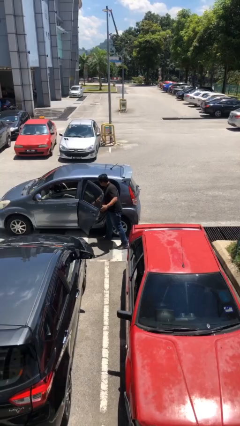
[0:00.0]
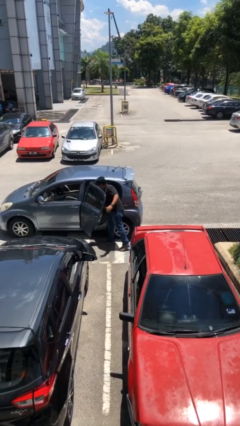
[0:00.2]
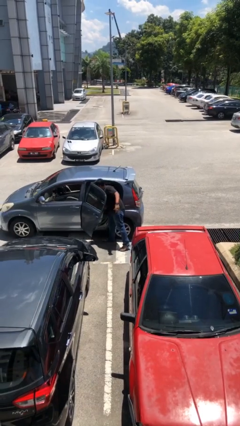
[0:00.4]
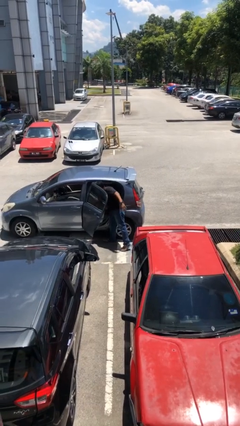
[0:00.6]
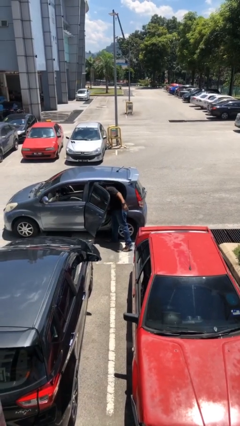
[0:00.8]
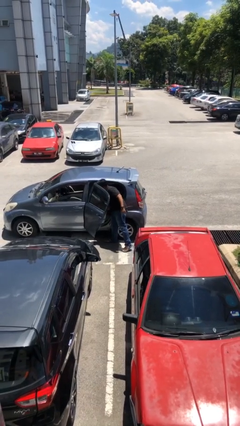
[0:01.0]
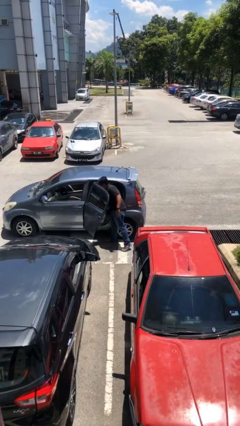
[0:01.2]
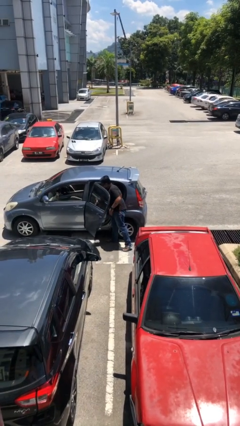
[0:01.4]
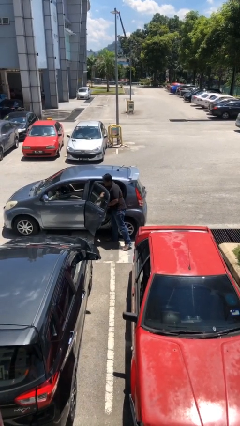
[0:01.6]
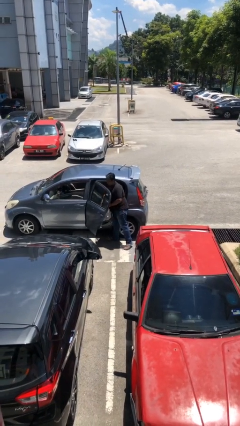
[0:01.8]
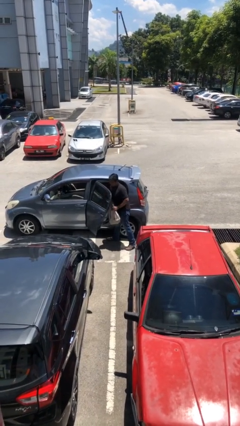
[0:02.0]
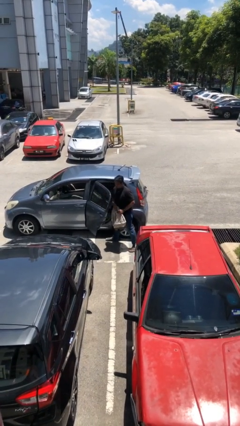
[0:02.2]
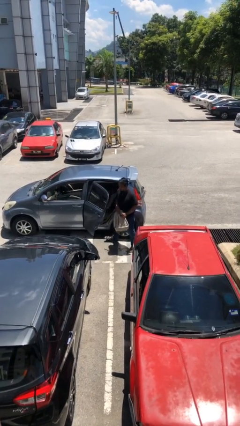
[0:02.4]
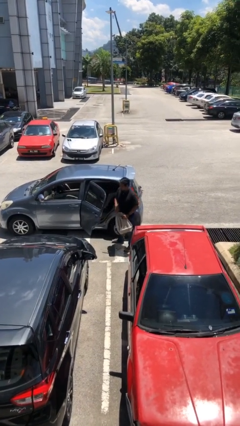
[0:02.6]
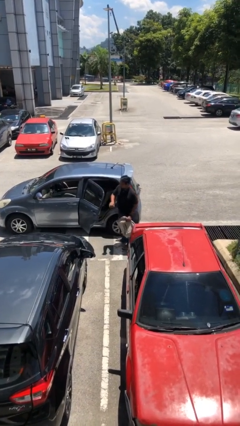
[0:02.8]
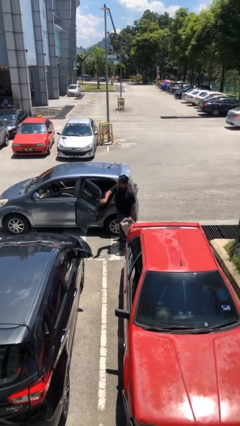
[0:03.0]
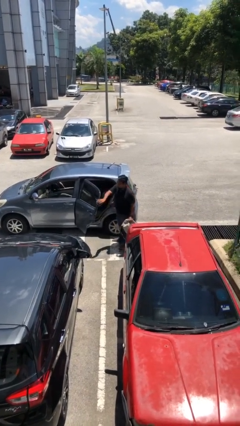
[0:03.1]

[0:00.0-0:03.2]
person unloads car

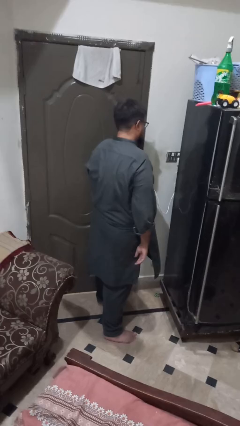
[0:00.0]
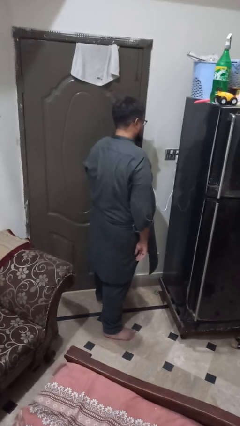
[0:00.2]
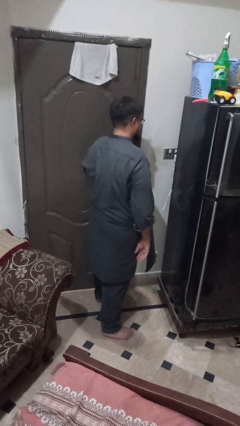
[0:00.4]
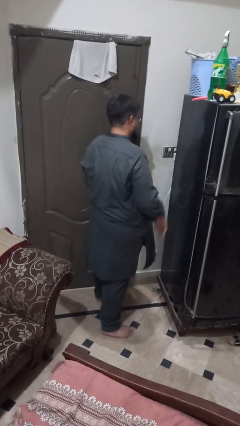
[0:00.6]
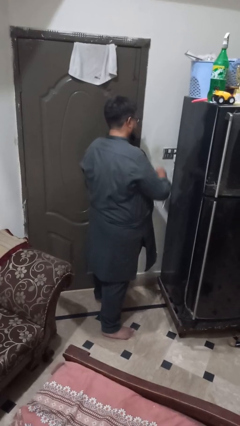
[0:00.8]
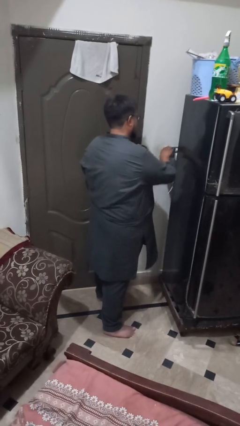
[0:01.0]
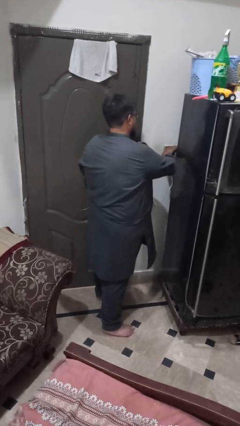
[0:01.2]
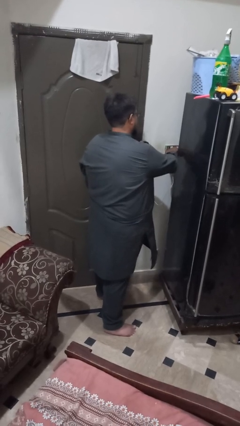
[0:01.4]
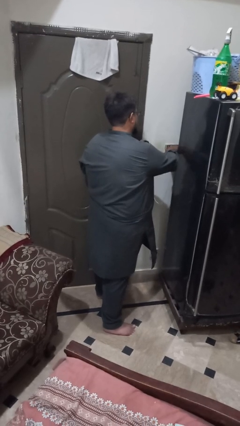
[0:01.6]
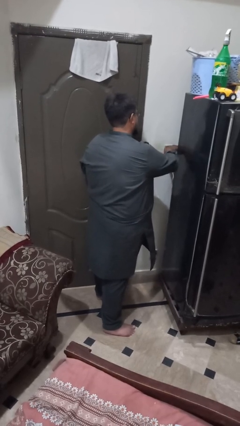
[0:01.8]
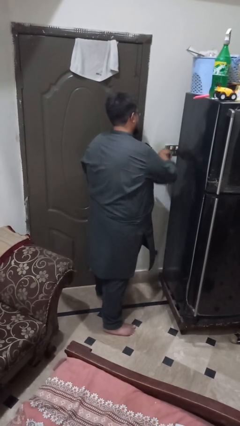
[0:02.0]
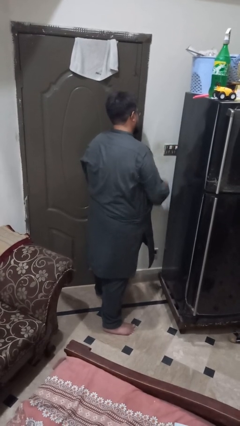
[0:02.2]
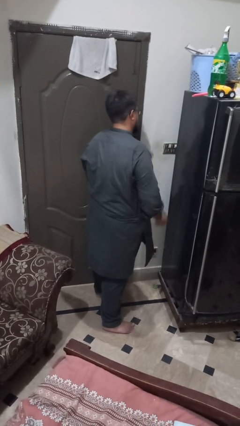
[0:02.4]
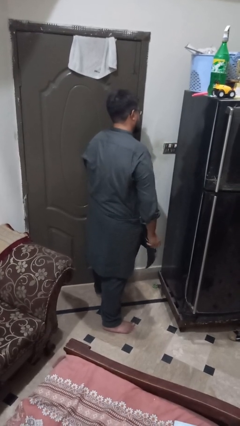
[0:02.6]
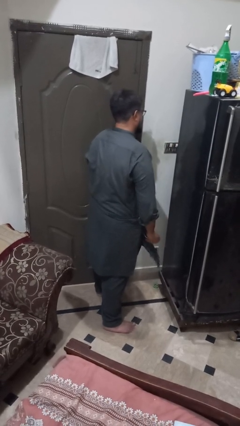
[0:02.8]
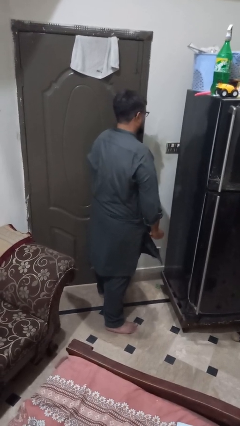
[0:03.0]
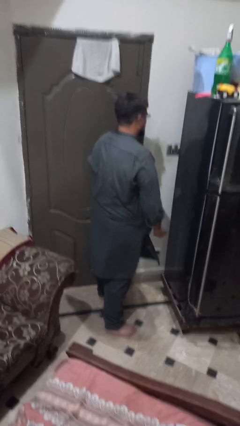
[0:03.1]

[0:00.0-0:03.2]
person unplugs from electrical socket

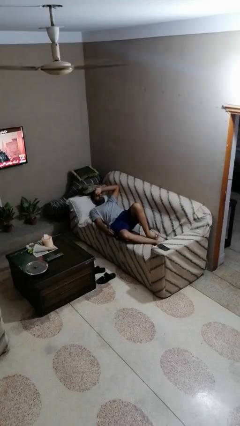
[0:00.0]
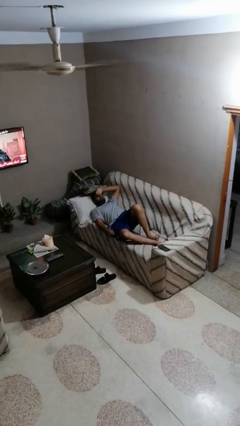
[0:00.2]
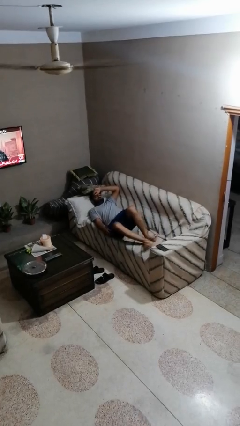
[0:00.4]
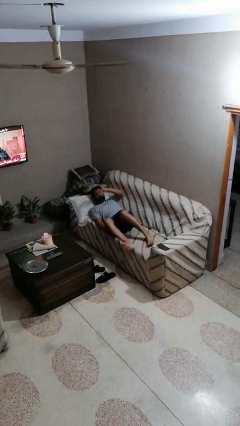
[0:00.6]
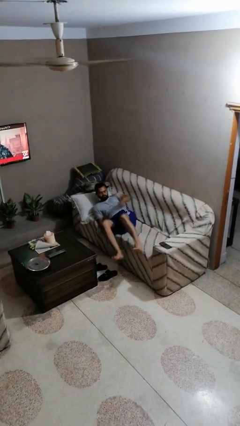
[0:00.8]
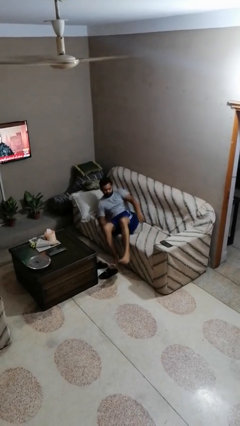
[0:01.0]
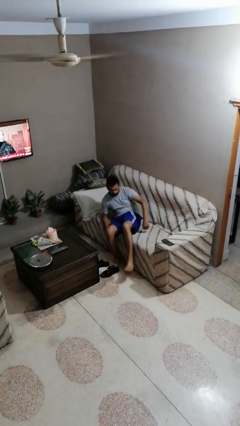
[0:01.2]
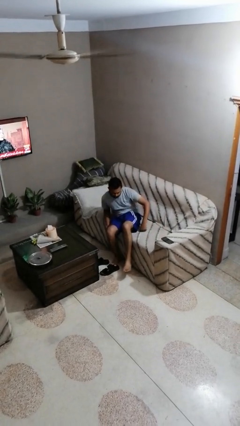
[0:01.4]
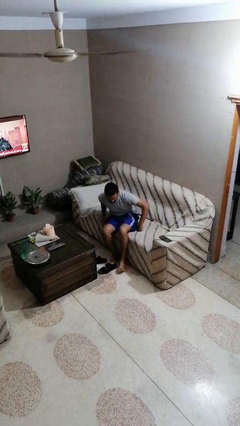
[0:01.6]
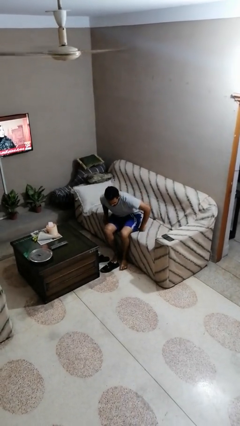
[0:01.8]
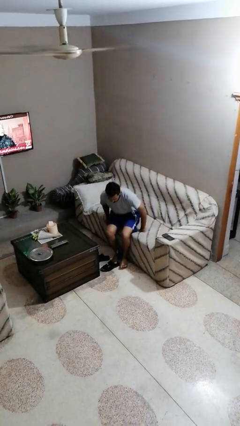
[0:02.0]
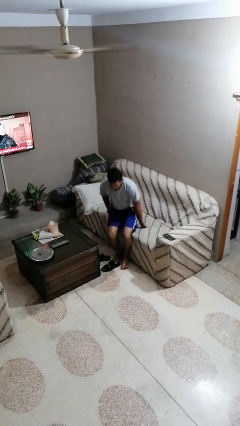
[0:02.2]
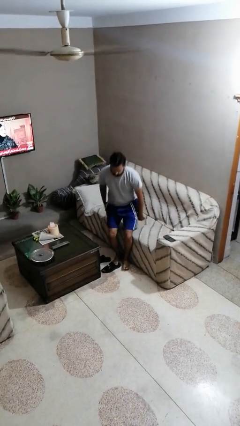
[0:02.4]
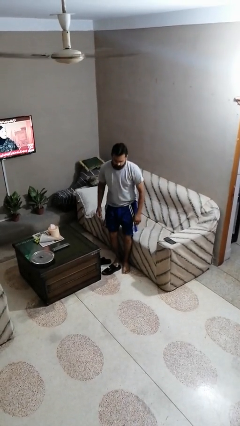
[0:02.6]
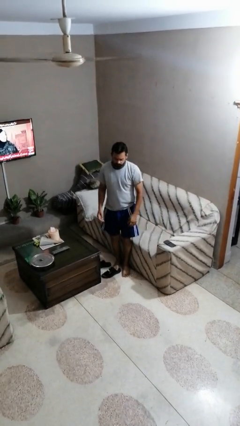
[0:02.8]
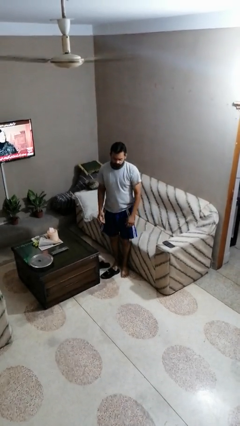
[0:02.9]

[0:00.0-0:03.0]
person stands up

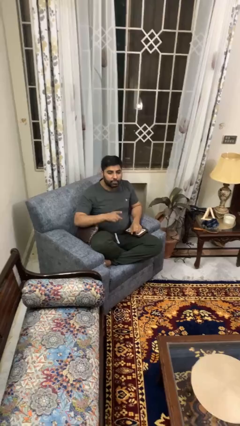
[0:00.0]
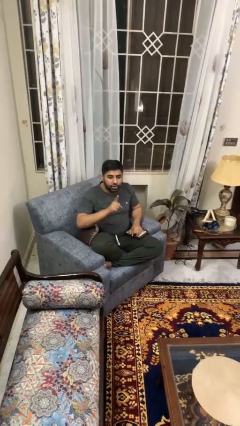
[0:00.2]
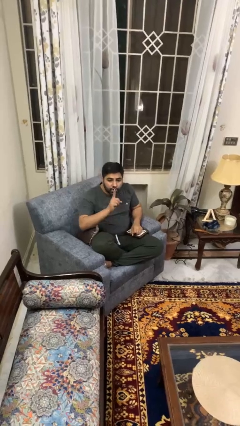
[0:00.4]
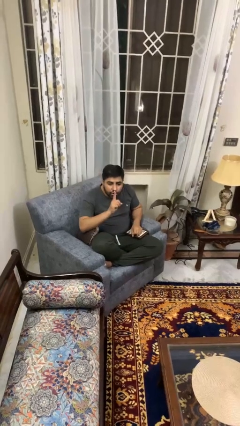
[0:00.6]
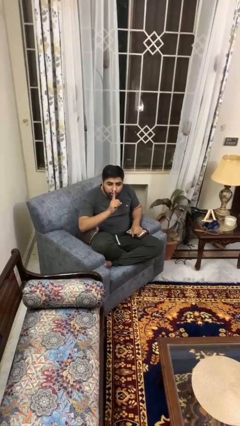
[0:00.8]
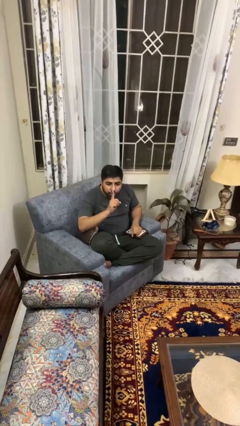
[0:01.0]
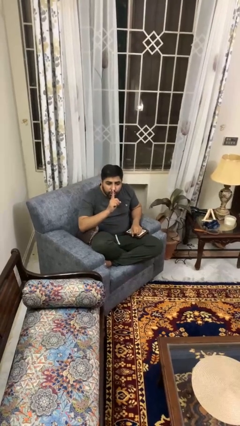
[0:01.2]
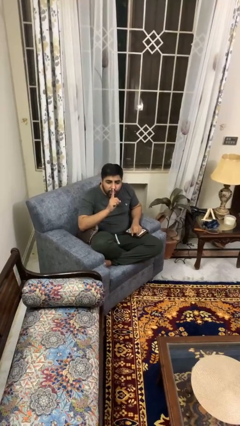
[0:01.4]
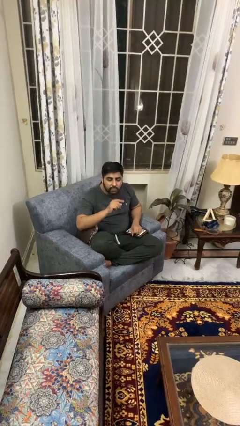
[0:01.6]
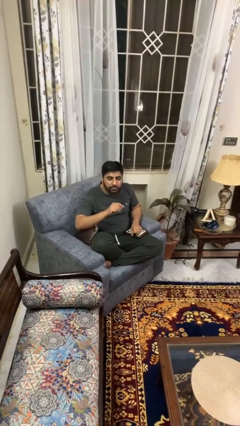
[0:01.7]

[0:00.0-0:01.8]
person gestures be quiet

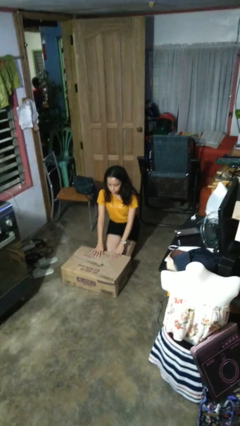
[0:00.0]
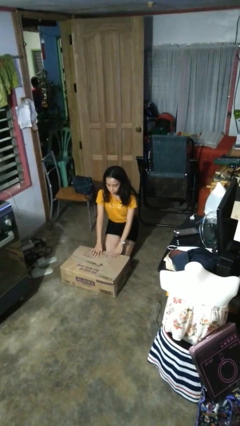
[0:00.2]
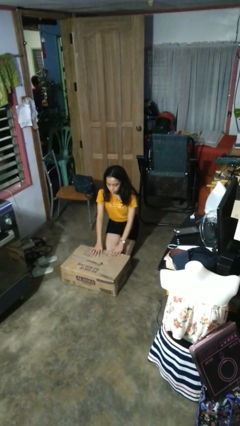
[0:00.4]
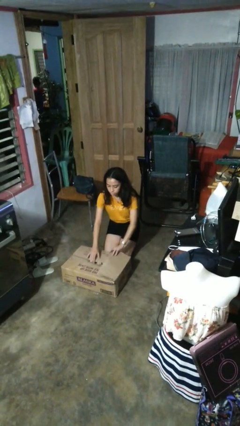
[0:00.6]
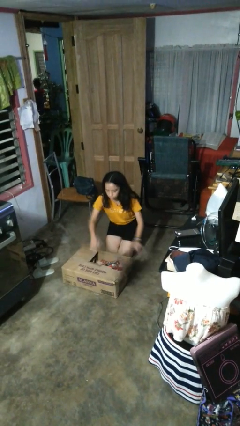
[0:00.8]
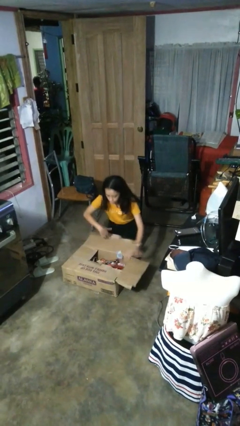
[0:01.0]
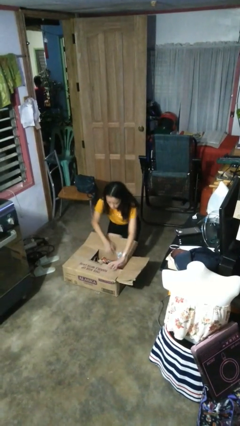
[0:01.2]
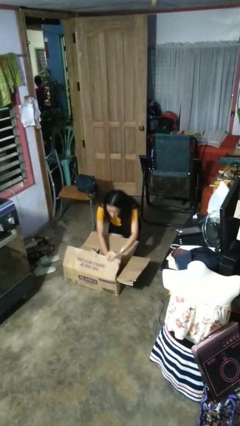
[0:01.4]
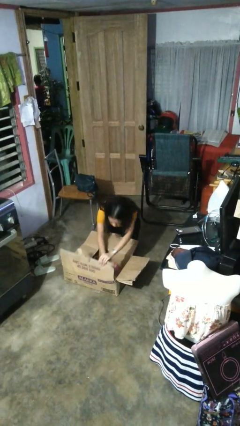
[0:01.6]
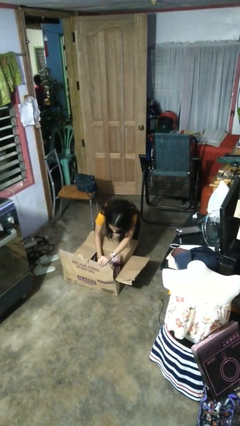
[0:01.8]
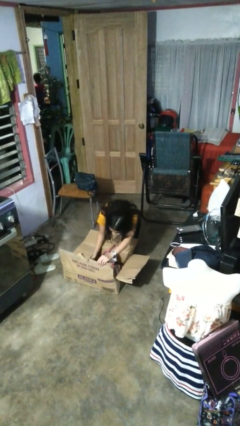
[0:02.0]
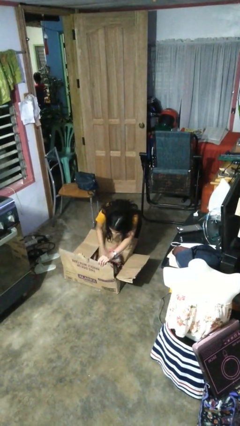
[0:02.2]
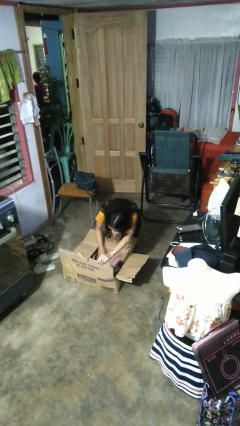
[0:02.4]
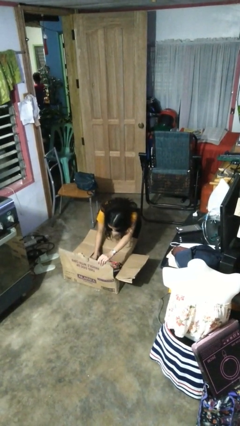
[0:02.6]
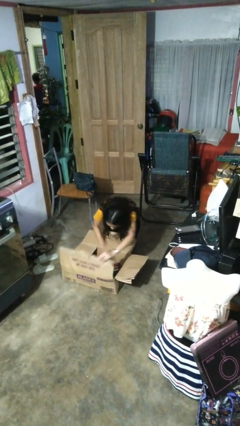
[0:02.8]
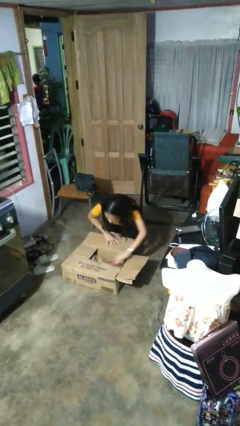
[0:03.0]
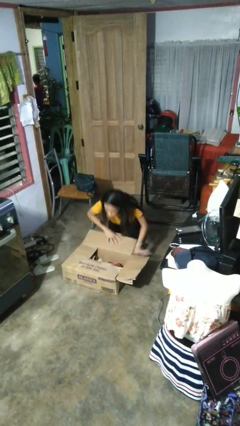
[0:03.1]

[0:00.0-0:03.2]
person searches in box

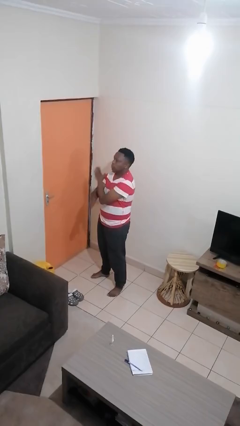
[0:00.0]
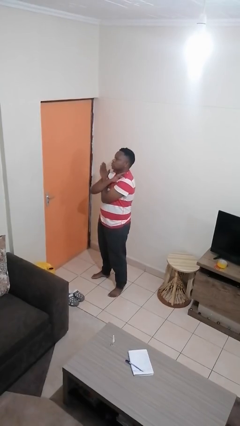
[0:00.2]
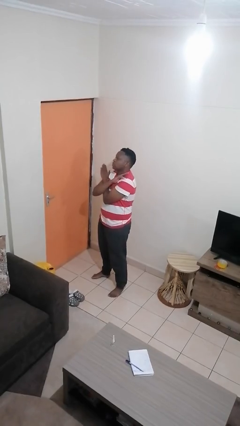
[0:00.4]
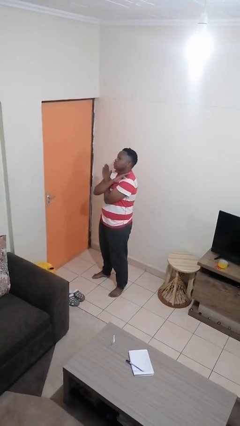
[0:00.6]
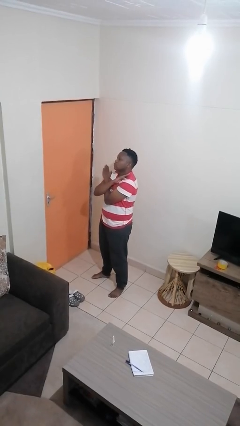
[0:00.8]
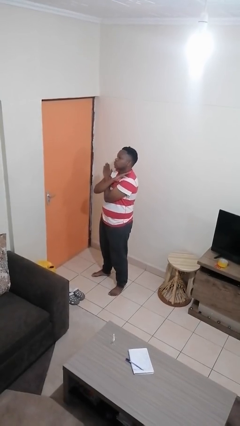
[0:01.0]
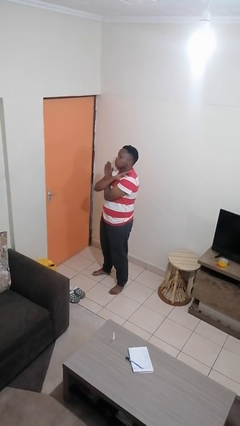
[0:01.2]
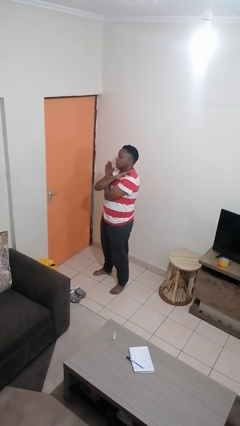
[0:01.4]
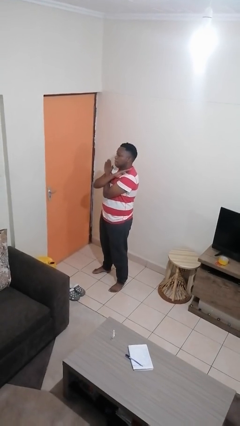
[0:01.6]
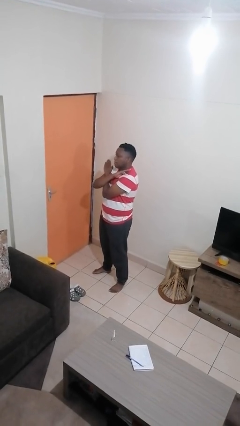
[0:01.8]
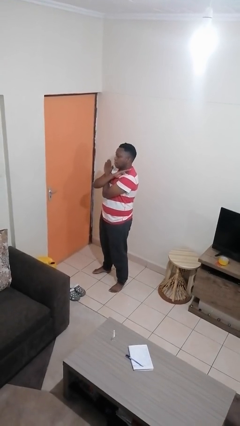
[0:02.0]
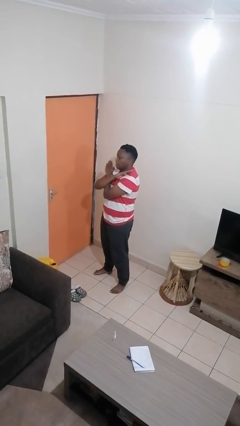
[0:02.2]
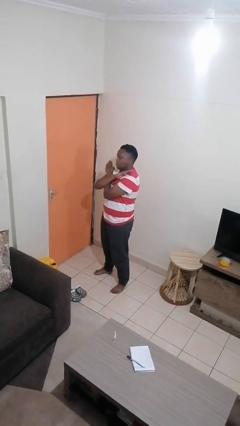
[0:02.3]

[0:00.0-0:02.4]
person gestures arms x

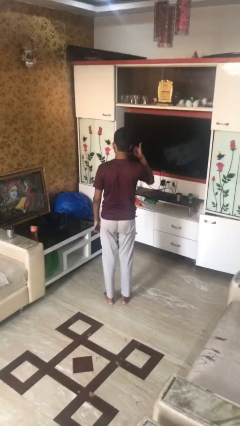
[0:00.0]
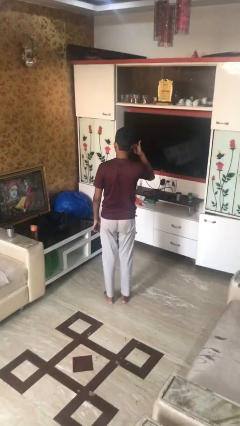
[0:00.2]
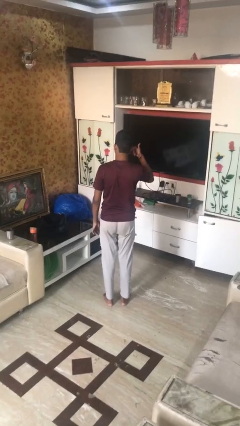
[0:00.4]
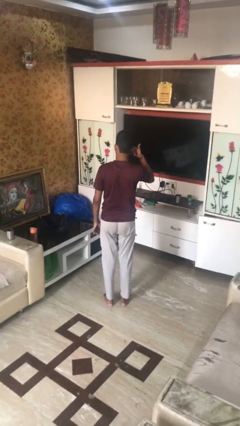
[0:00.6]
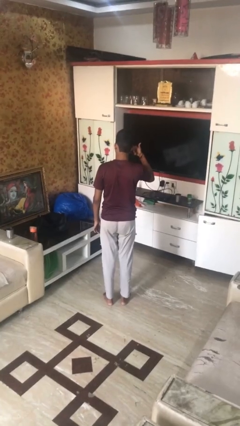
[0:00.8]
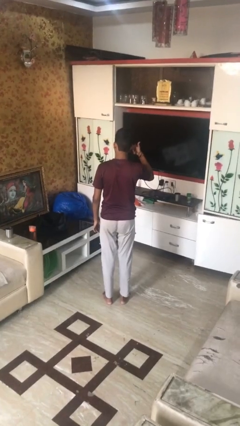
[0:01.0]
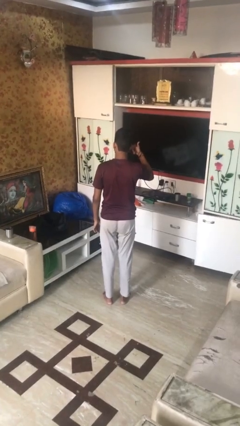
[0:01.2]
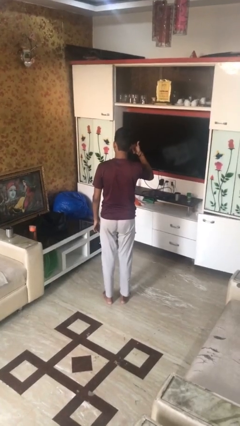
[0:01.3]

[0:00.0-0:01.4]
person gestures call me
